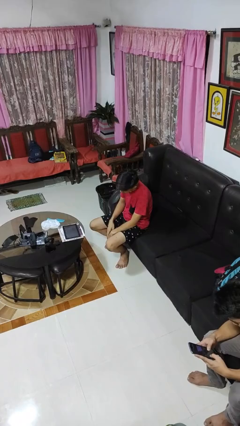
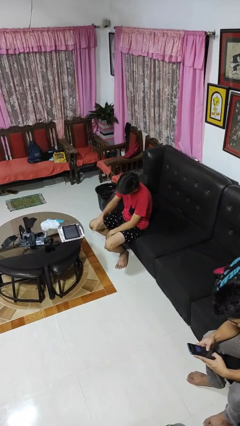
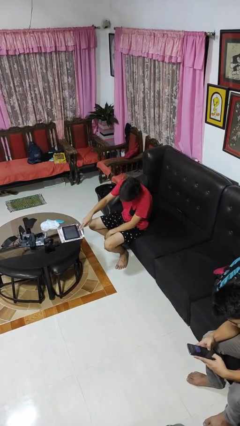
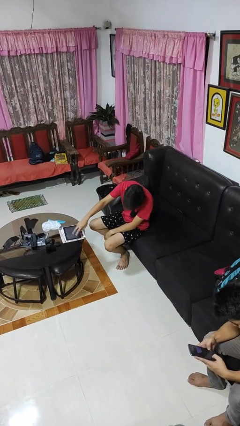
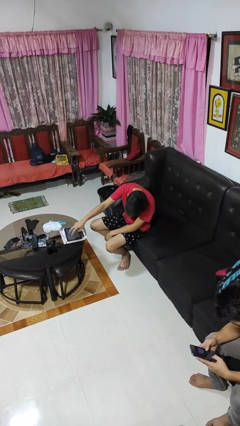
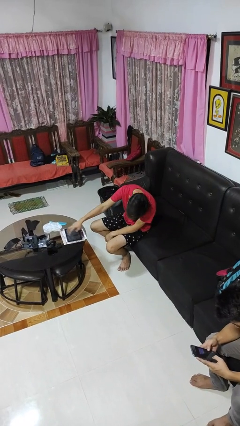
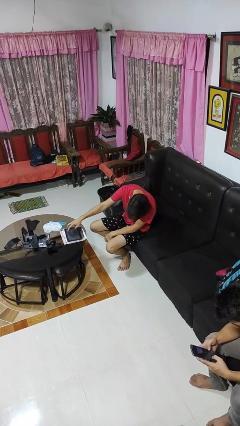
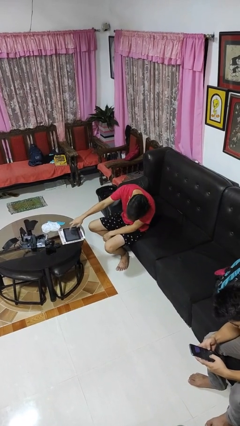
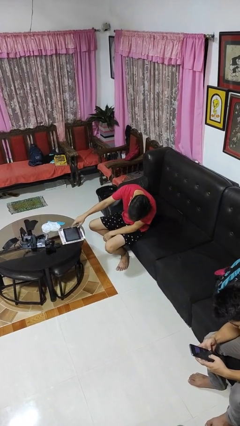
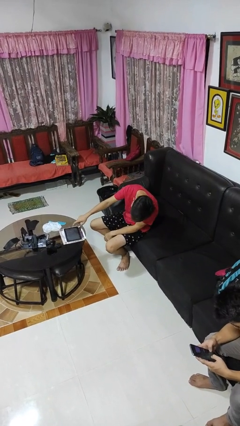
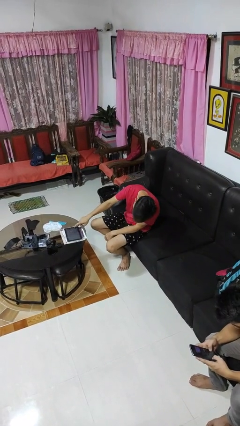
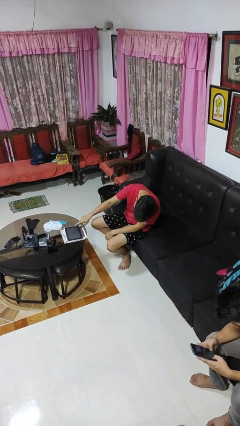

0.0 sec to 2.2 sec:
person taps object with finger

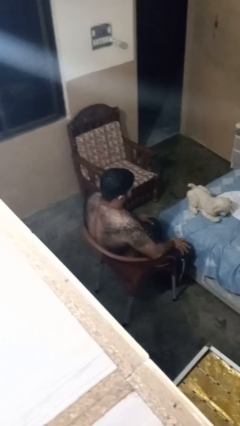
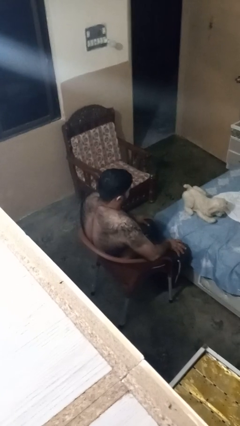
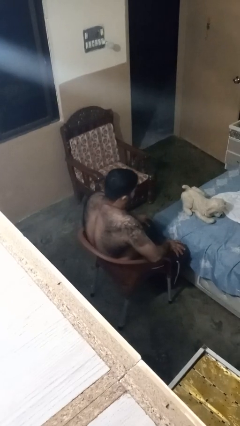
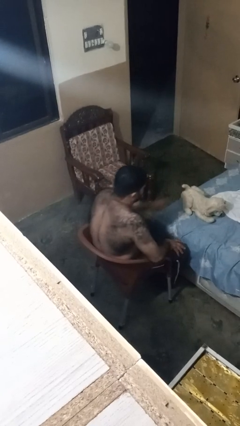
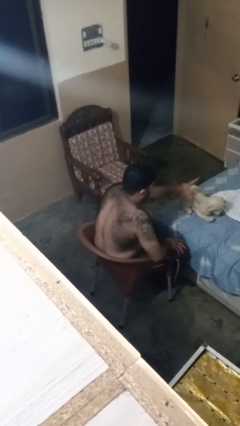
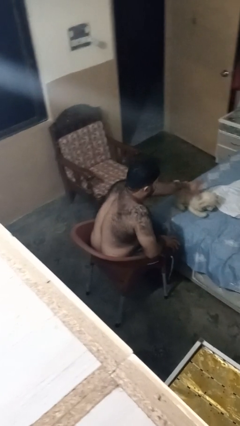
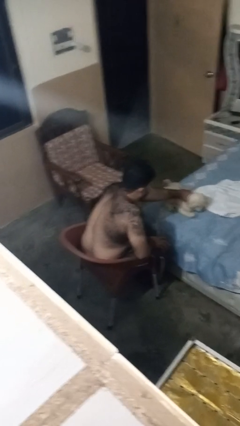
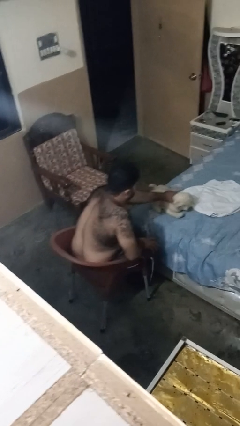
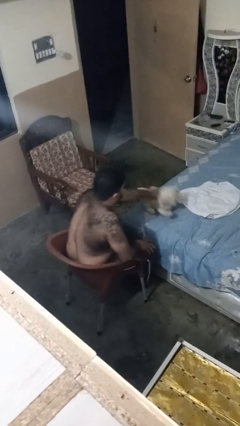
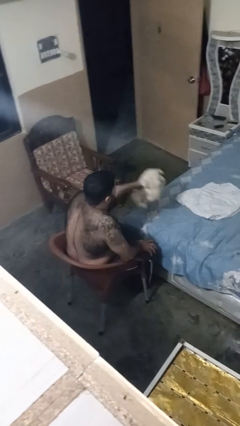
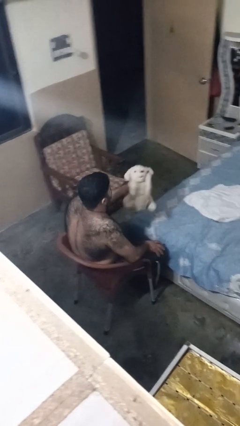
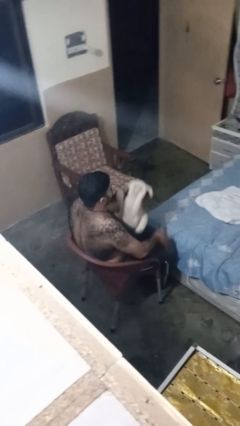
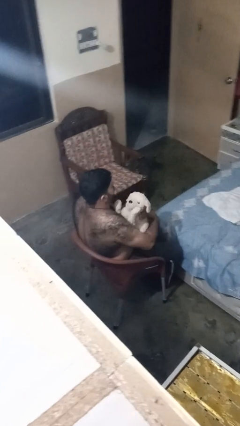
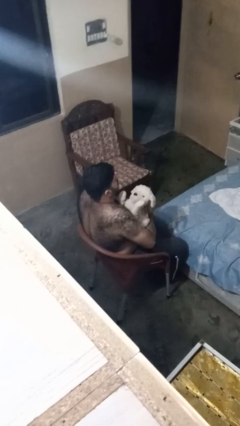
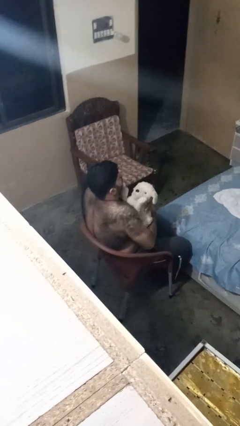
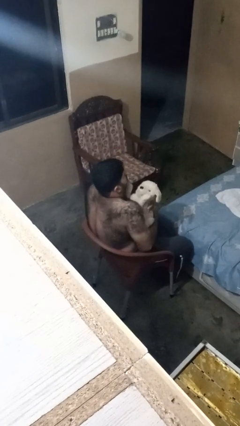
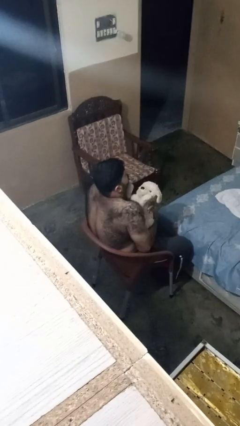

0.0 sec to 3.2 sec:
person hugs stuffed animal

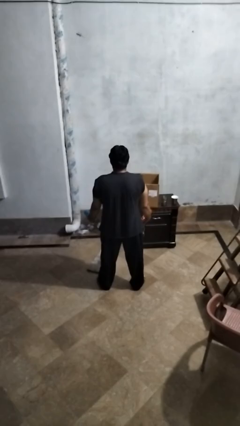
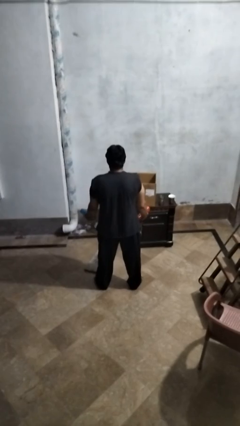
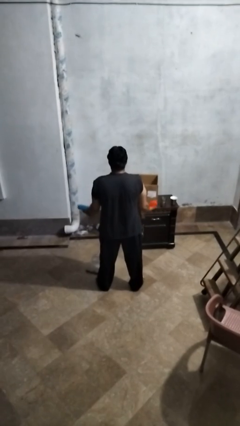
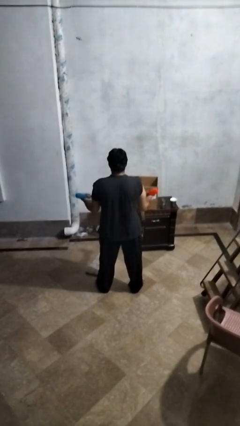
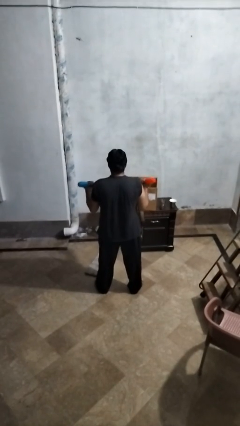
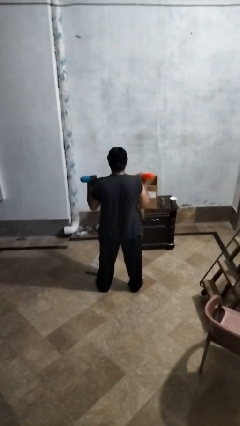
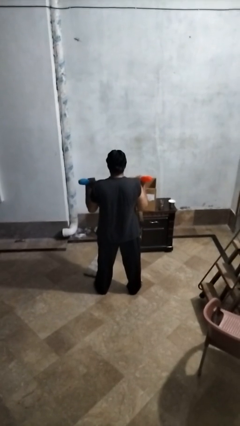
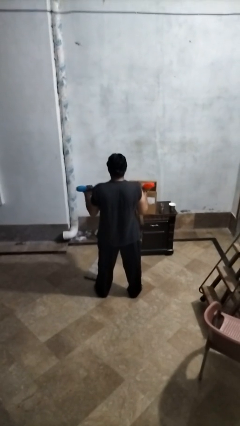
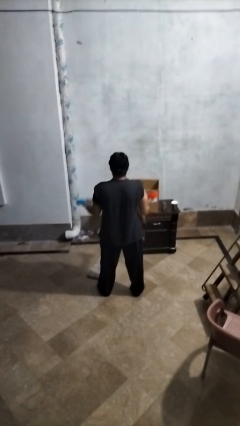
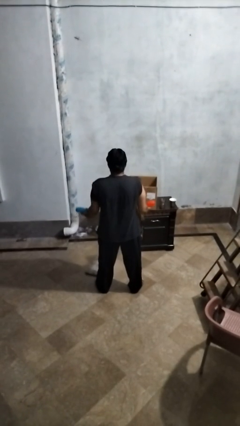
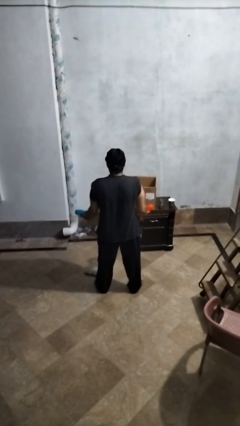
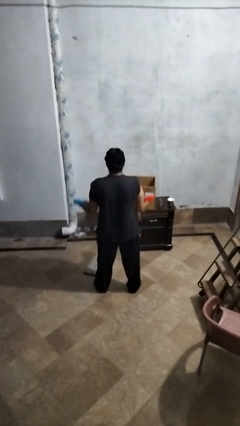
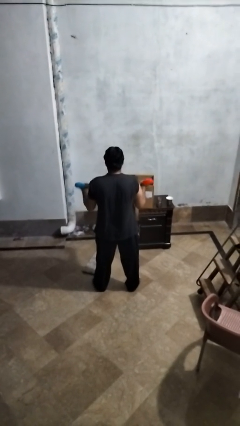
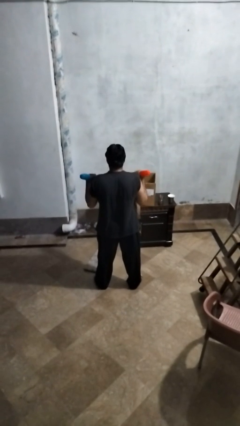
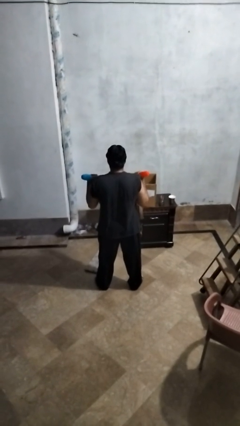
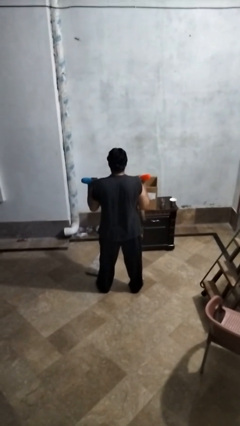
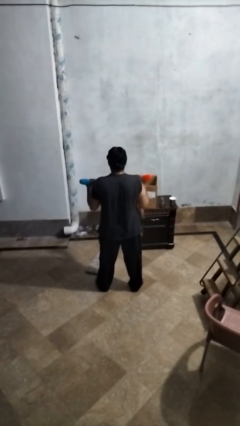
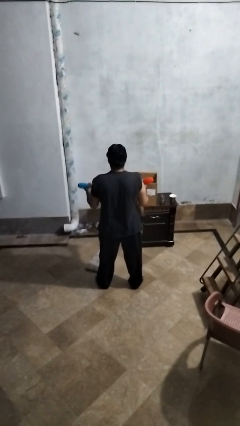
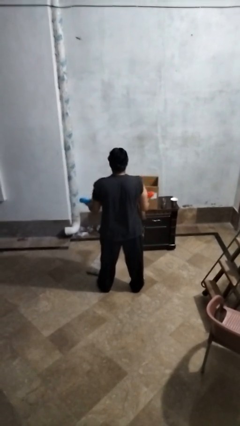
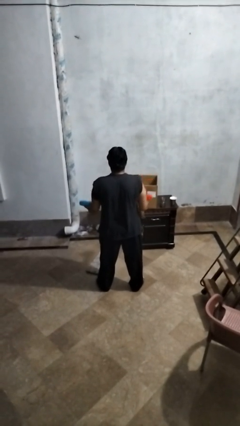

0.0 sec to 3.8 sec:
person lifts dumbbells

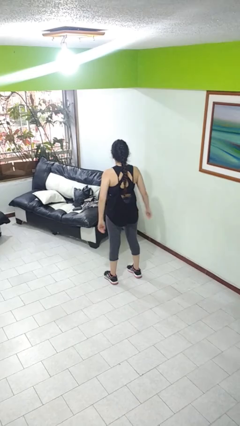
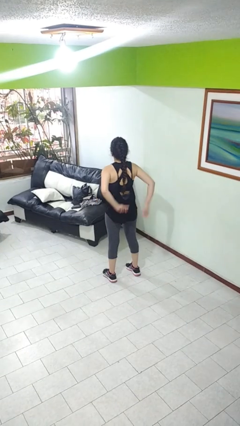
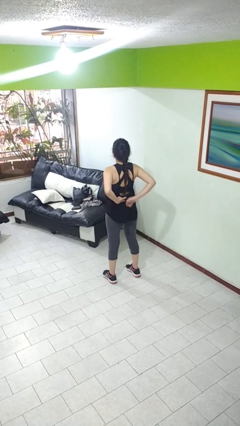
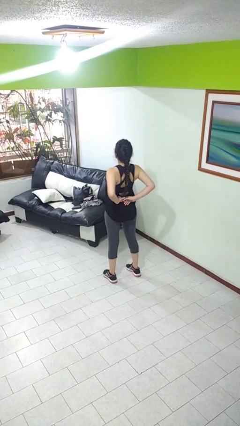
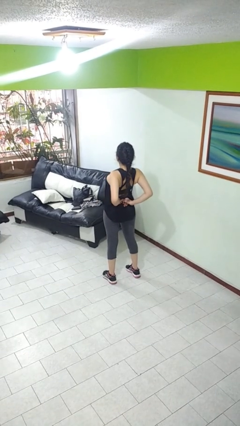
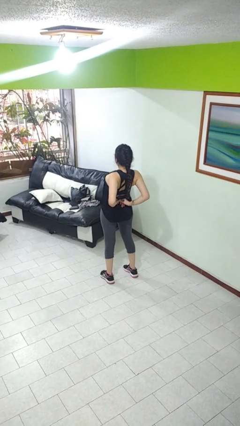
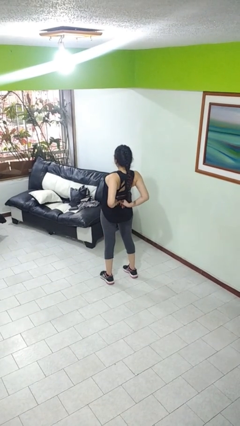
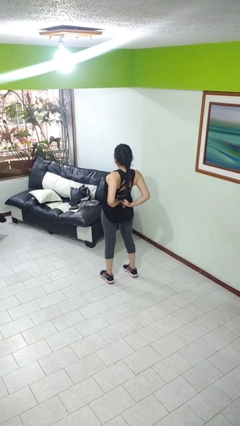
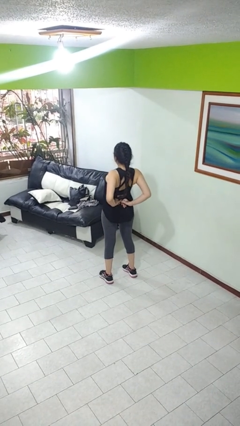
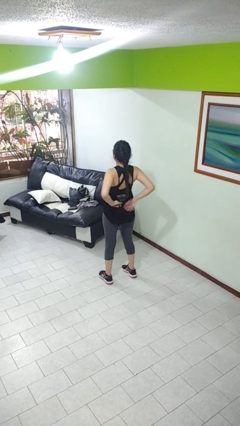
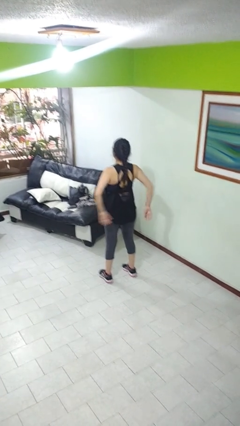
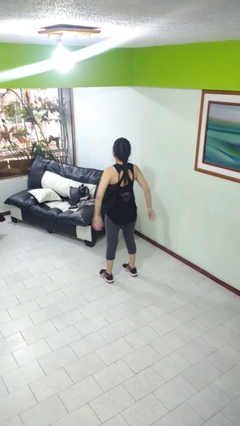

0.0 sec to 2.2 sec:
person stretches back

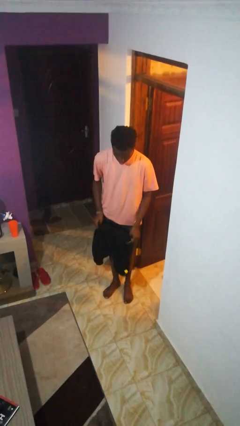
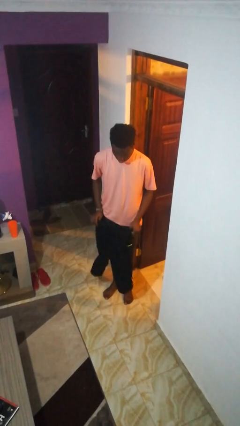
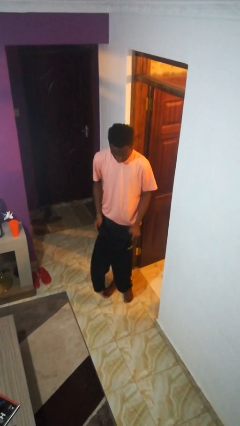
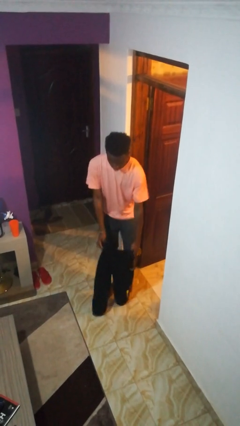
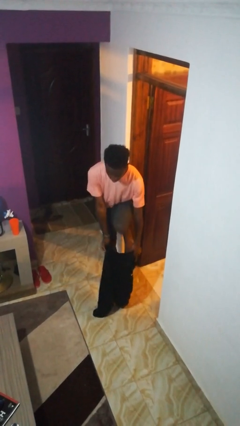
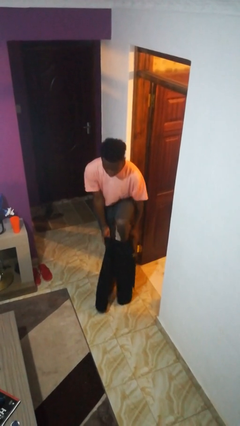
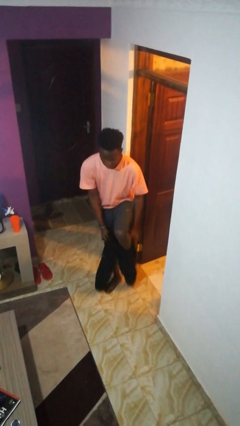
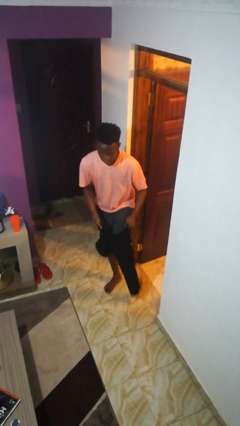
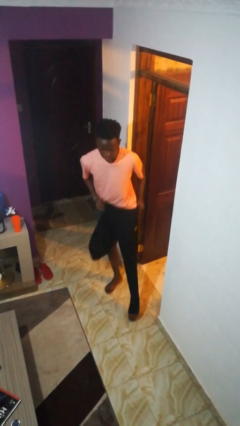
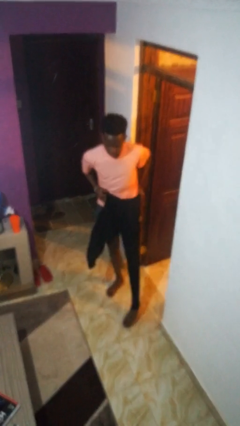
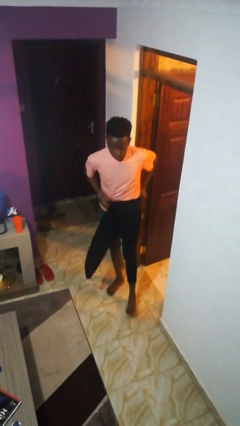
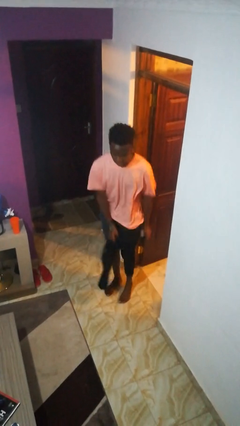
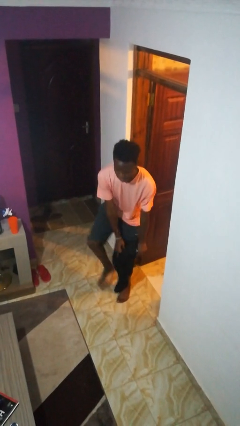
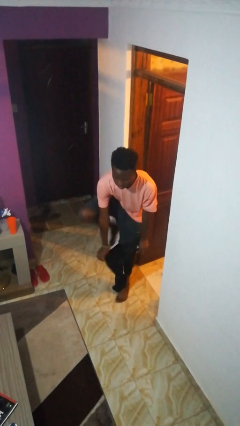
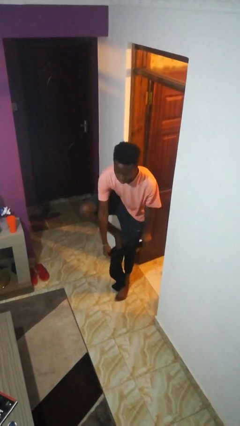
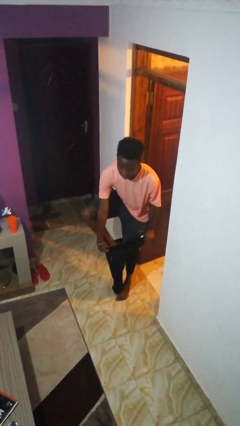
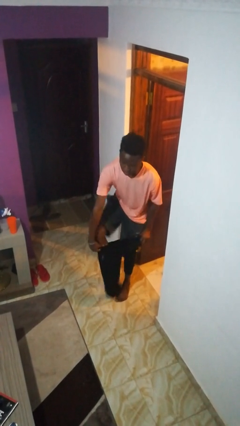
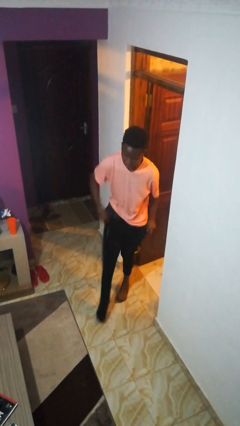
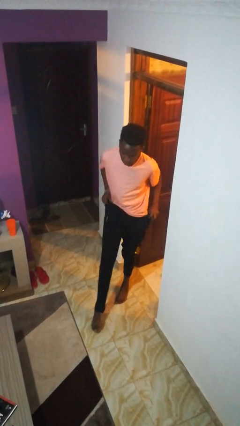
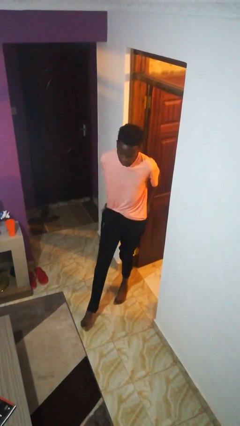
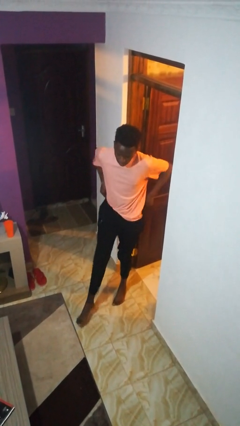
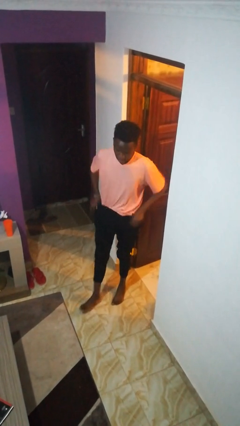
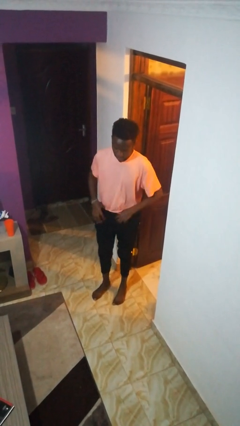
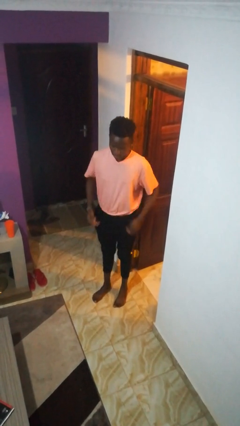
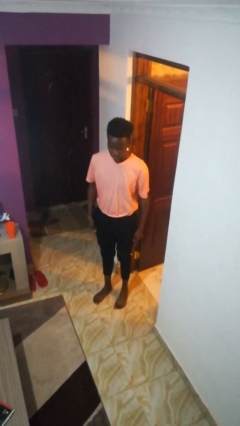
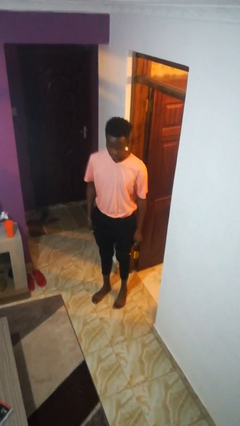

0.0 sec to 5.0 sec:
person puts on pants

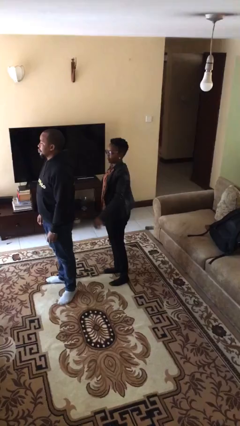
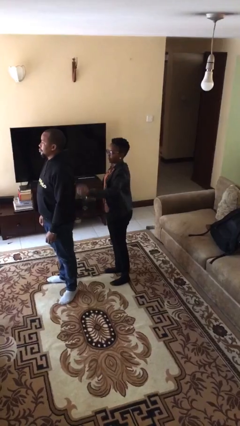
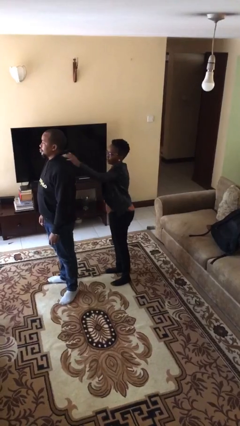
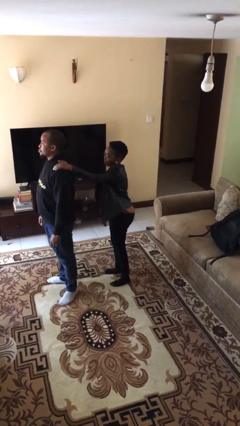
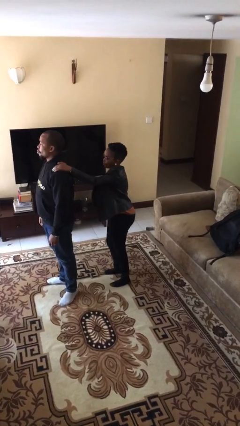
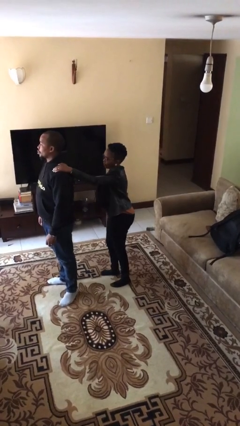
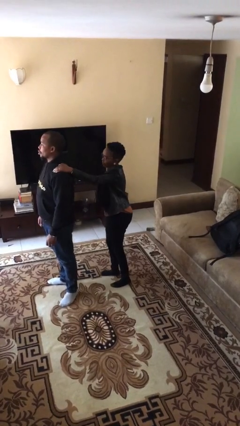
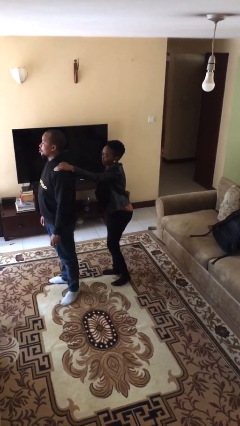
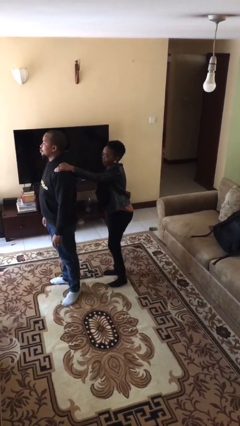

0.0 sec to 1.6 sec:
person grabs person by shoulder
